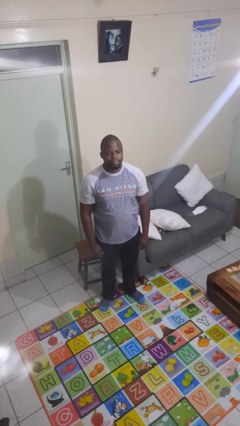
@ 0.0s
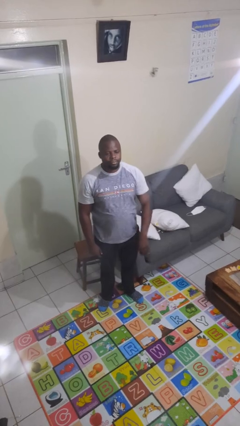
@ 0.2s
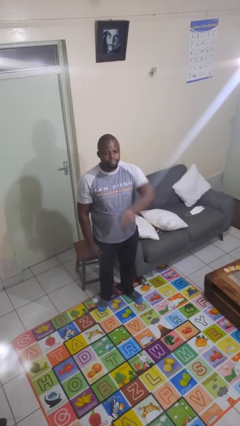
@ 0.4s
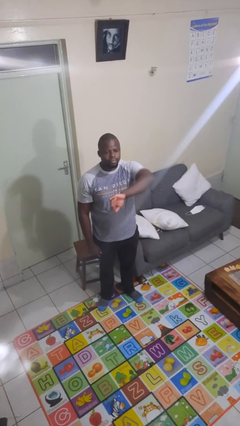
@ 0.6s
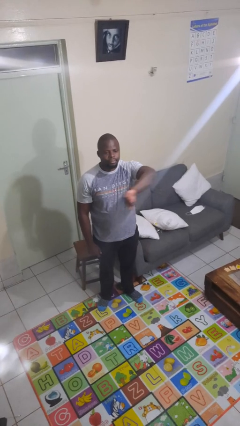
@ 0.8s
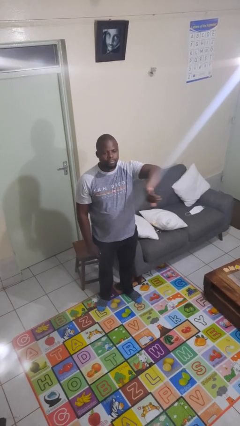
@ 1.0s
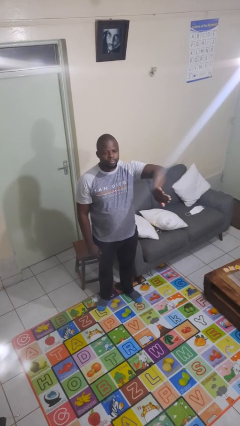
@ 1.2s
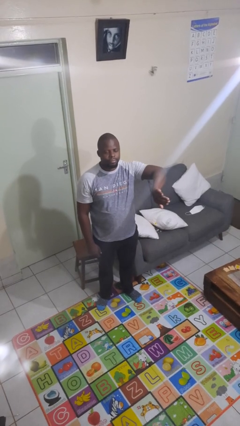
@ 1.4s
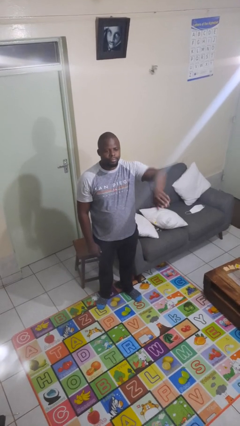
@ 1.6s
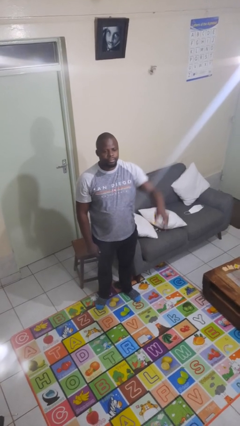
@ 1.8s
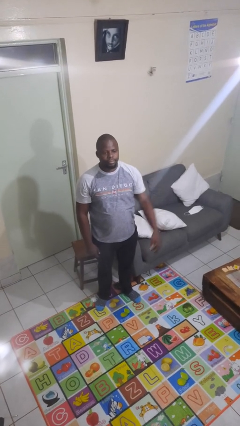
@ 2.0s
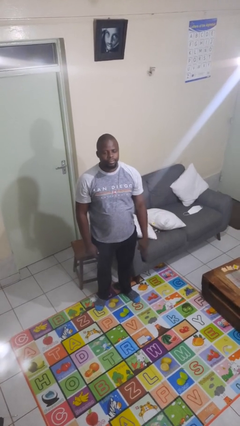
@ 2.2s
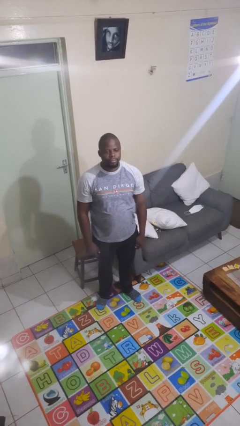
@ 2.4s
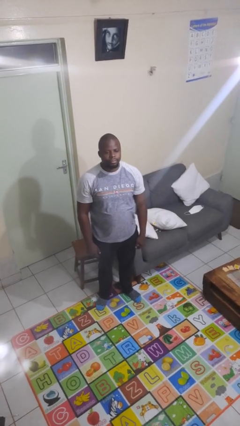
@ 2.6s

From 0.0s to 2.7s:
person gestures swipe left

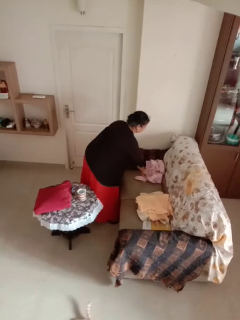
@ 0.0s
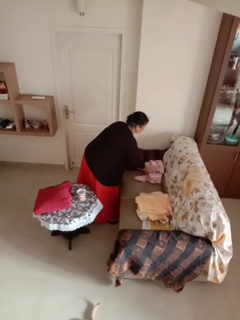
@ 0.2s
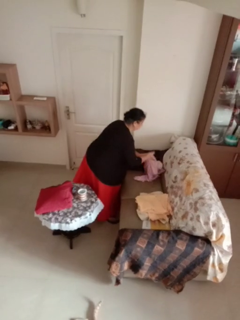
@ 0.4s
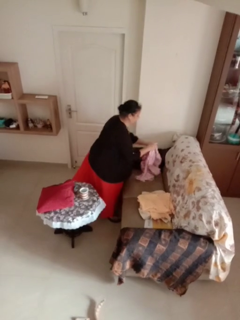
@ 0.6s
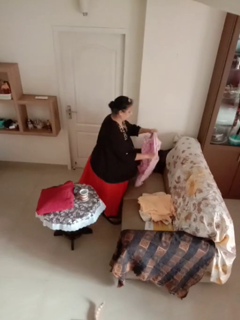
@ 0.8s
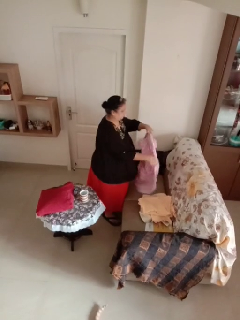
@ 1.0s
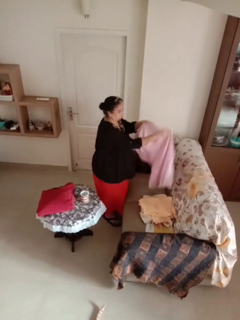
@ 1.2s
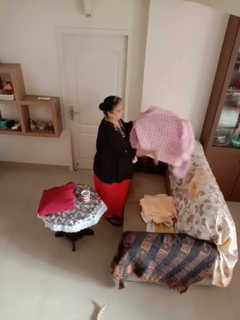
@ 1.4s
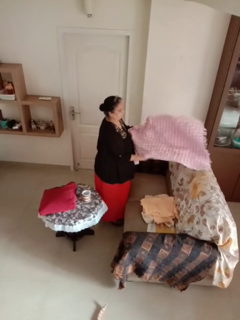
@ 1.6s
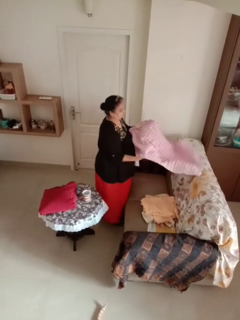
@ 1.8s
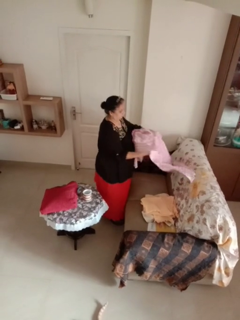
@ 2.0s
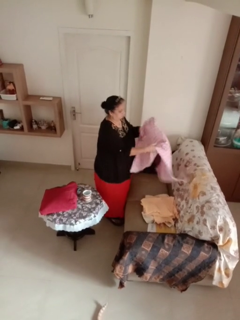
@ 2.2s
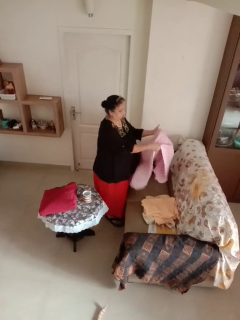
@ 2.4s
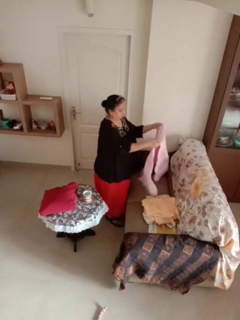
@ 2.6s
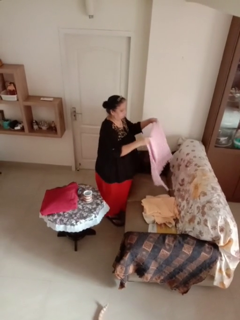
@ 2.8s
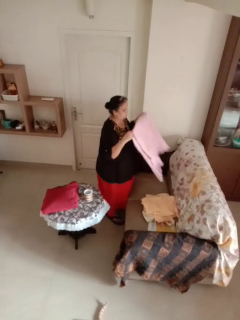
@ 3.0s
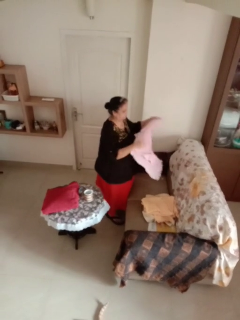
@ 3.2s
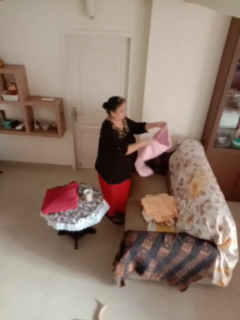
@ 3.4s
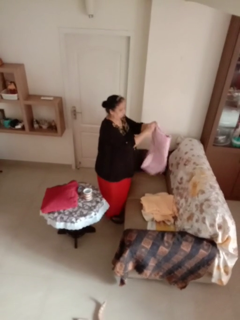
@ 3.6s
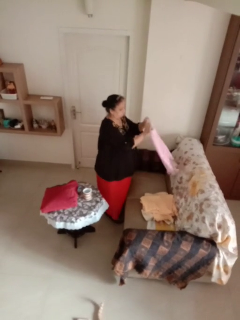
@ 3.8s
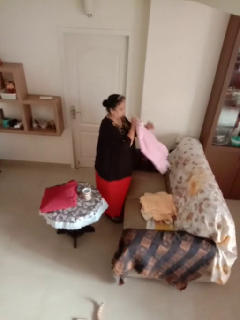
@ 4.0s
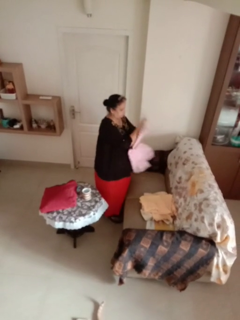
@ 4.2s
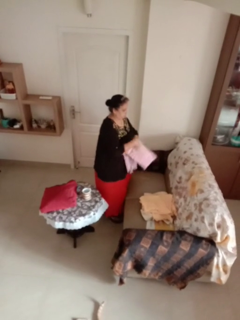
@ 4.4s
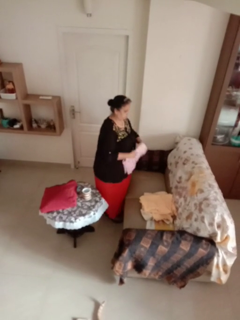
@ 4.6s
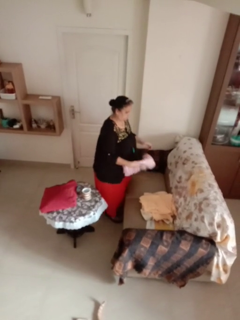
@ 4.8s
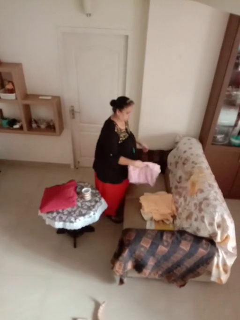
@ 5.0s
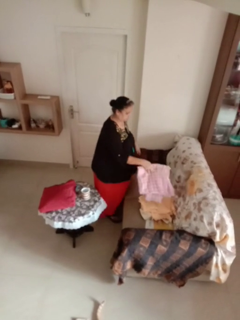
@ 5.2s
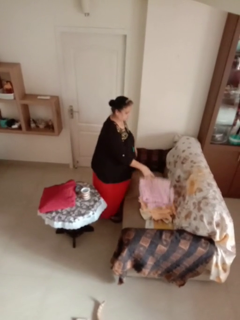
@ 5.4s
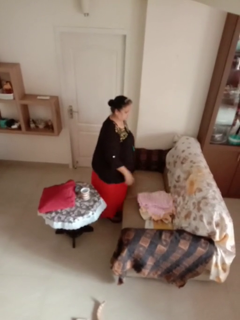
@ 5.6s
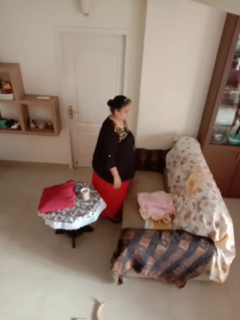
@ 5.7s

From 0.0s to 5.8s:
person folds towel

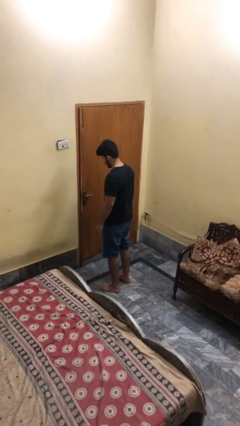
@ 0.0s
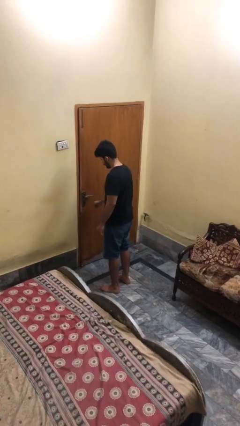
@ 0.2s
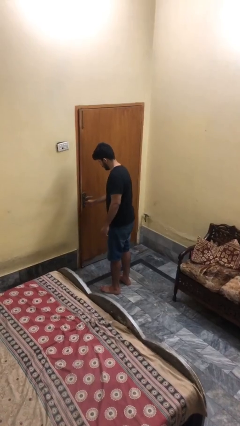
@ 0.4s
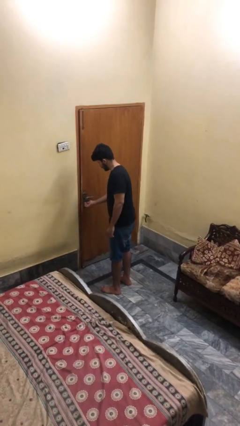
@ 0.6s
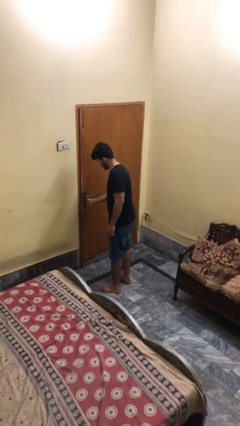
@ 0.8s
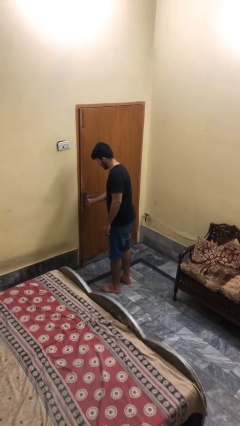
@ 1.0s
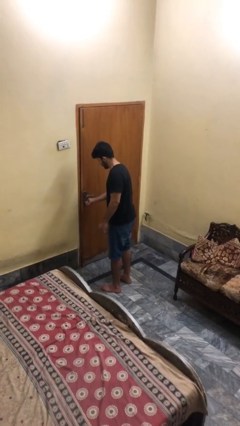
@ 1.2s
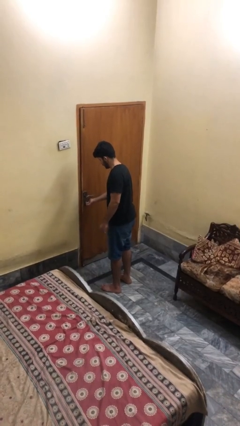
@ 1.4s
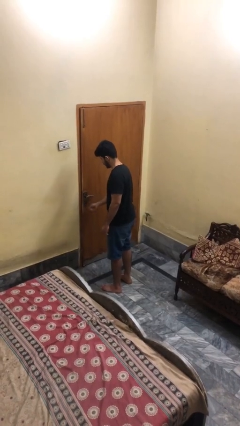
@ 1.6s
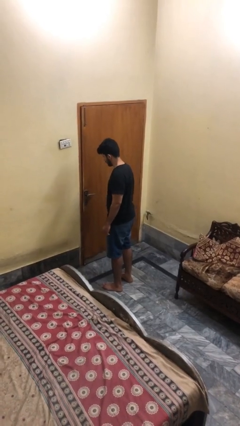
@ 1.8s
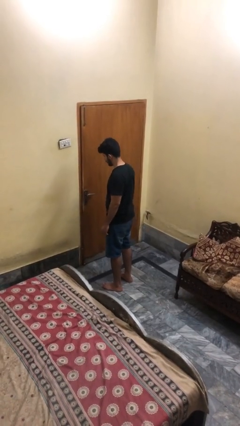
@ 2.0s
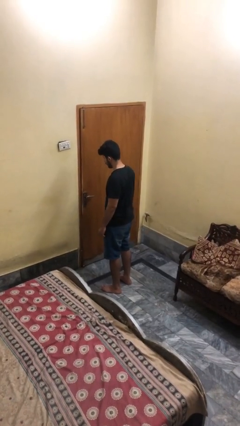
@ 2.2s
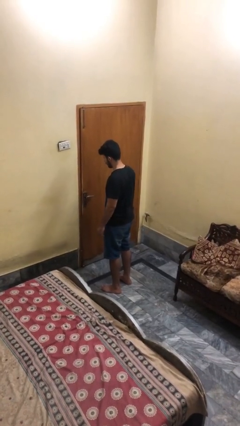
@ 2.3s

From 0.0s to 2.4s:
person unlocks door with keys

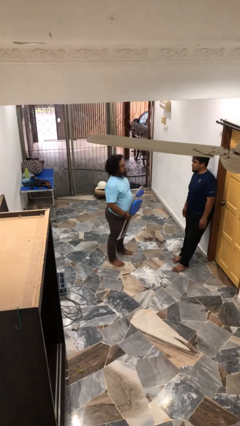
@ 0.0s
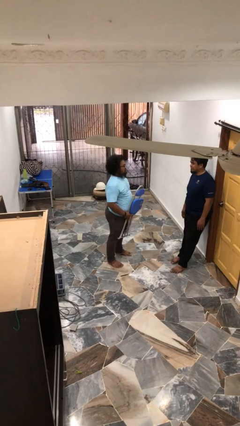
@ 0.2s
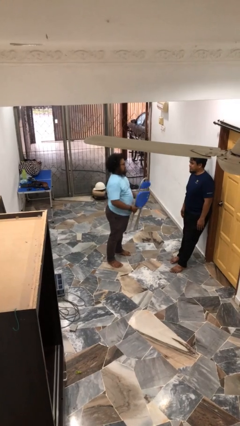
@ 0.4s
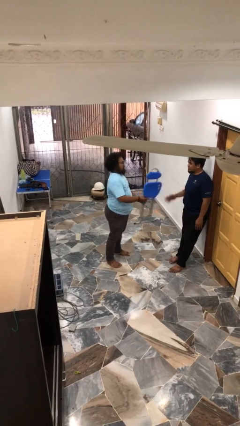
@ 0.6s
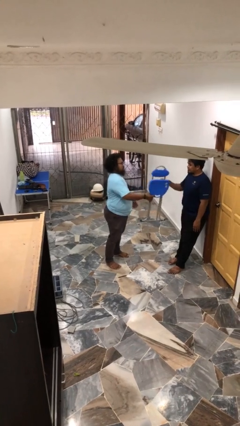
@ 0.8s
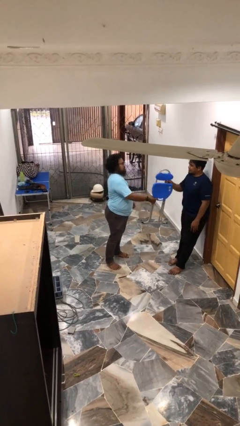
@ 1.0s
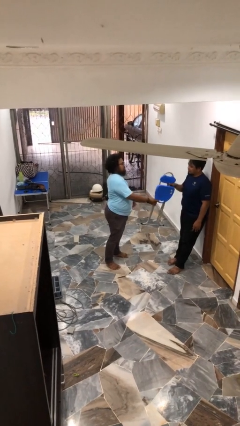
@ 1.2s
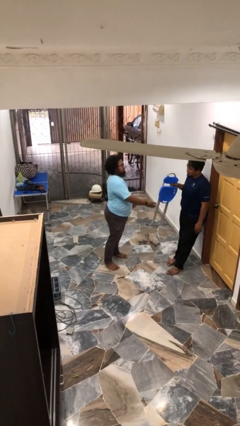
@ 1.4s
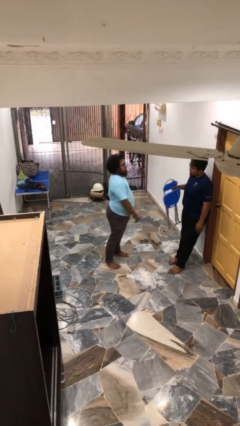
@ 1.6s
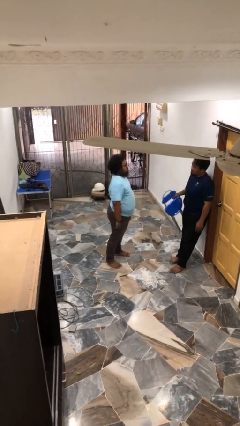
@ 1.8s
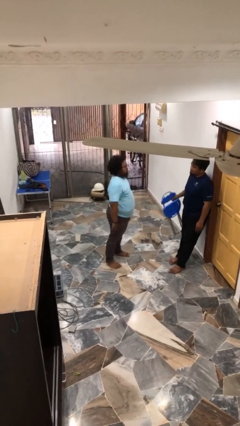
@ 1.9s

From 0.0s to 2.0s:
person transfers object to person

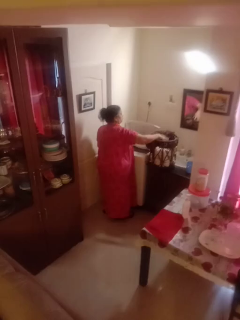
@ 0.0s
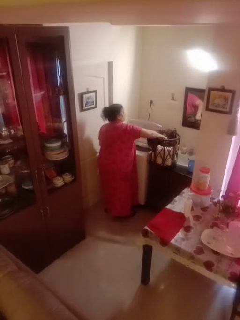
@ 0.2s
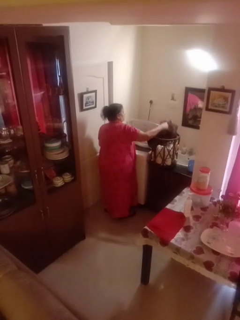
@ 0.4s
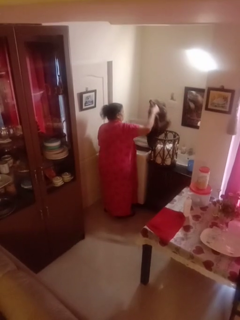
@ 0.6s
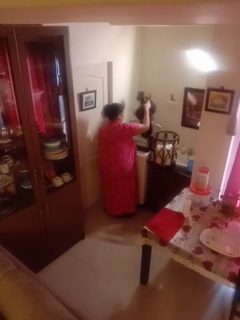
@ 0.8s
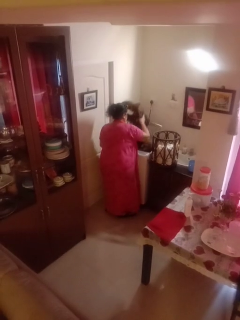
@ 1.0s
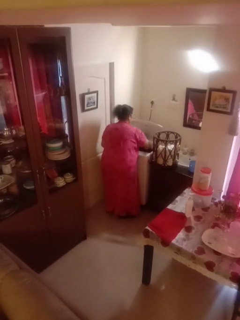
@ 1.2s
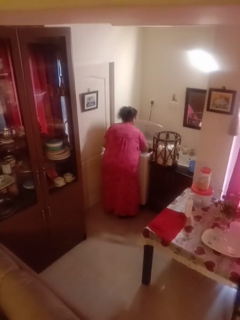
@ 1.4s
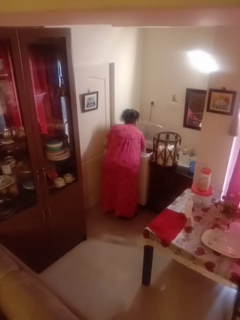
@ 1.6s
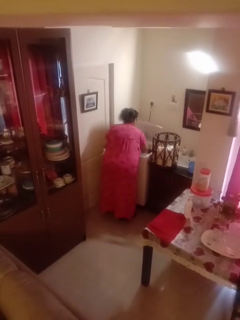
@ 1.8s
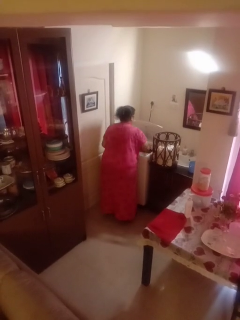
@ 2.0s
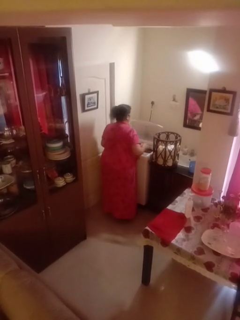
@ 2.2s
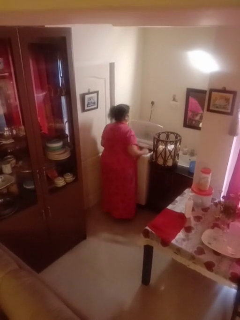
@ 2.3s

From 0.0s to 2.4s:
person loads dryer

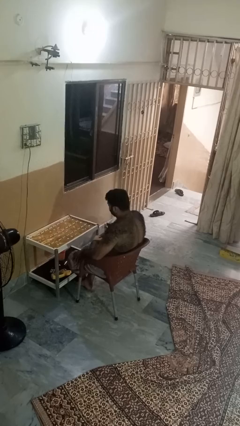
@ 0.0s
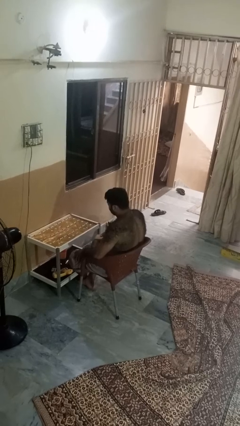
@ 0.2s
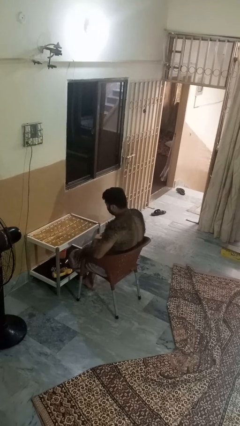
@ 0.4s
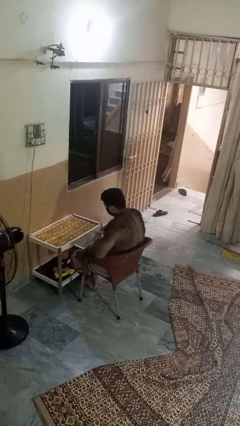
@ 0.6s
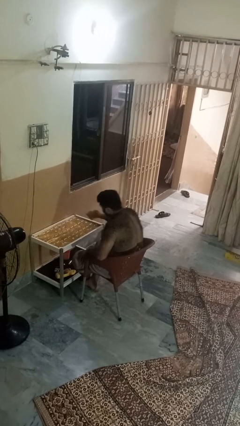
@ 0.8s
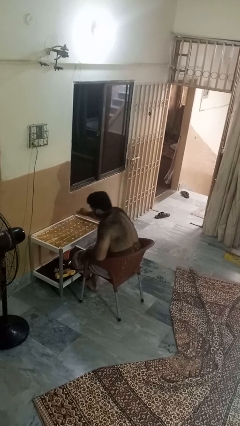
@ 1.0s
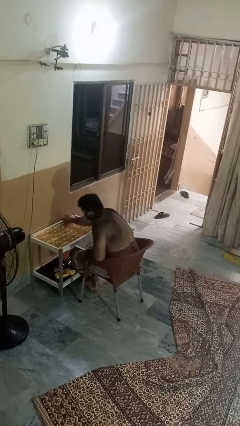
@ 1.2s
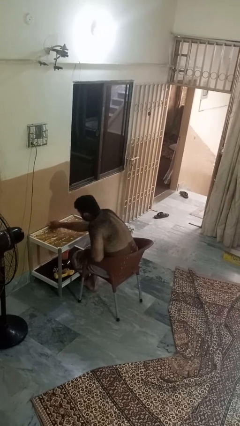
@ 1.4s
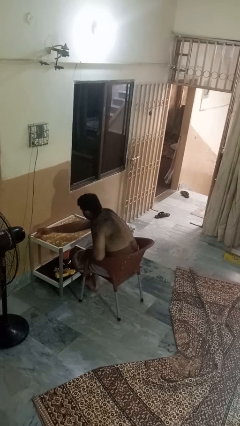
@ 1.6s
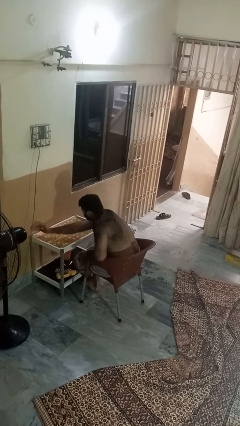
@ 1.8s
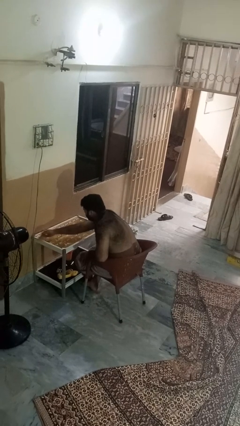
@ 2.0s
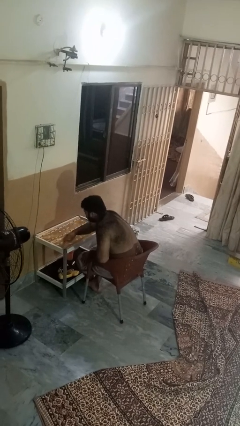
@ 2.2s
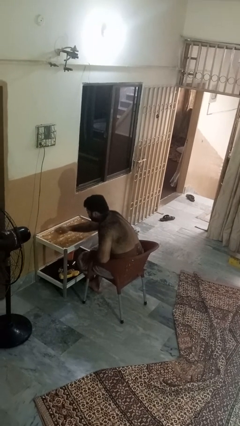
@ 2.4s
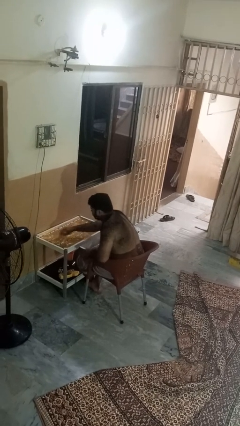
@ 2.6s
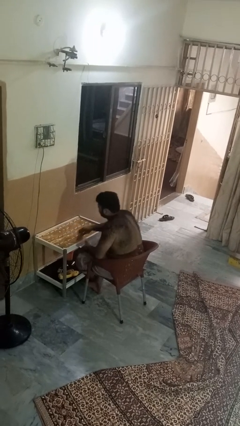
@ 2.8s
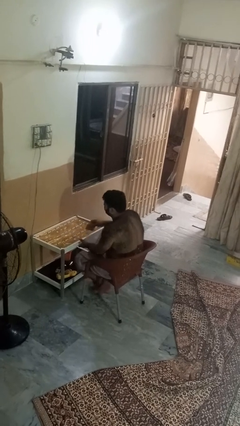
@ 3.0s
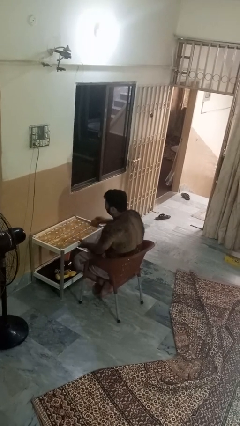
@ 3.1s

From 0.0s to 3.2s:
person cleans table with rag

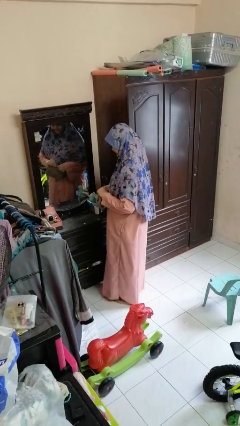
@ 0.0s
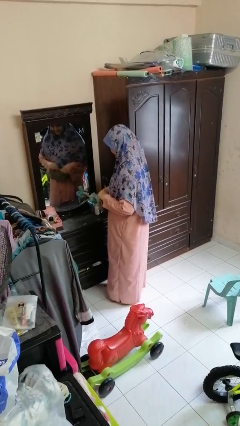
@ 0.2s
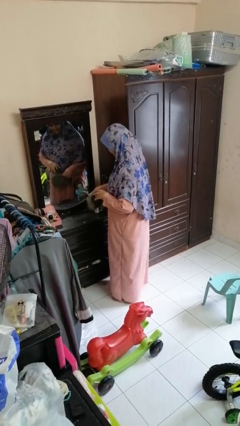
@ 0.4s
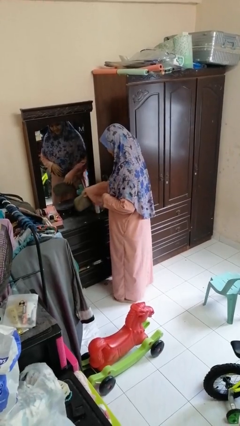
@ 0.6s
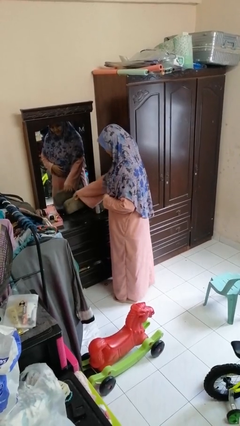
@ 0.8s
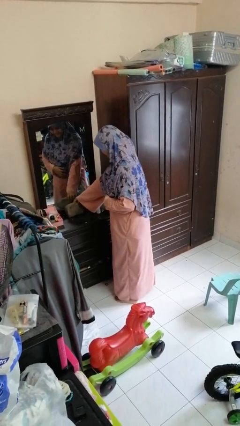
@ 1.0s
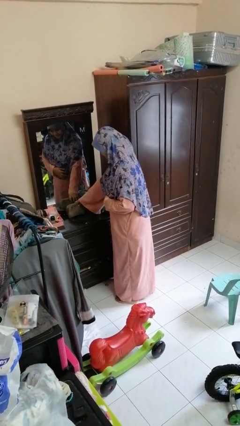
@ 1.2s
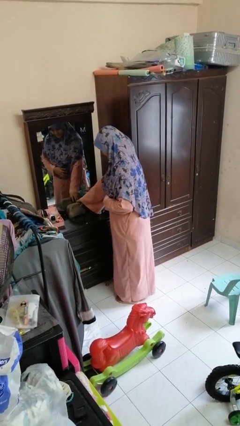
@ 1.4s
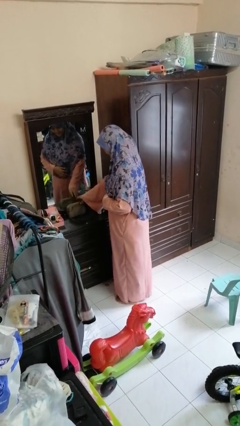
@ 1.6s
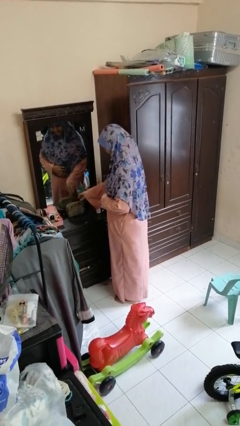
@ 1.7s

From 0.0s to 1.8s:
person puts down object on countertop
